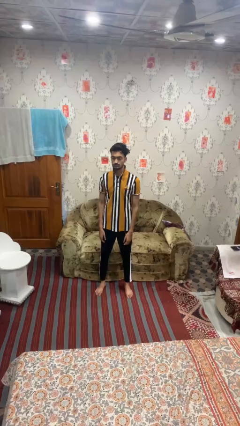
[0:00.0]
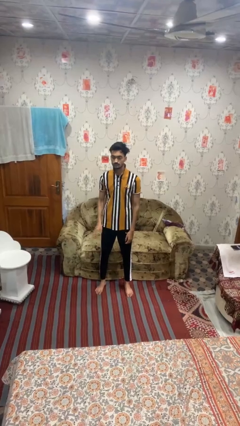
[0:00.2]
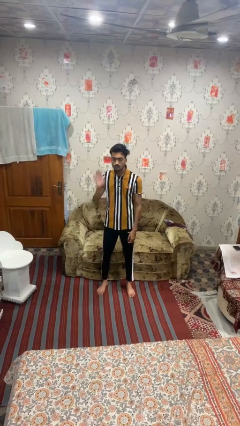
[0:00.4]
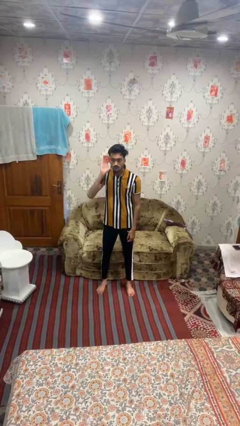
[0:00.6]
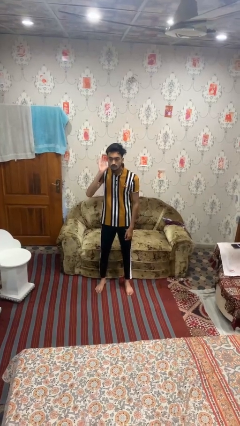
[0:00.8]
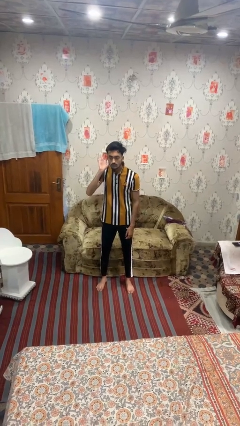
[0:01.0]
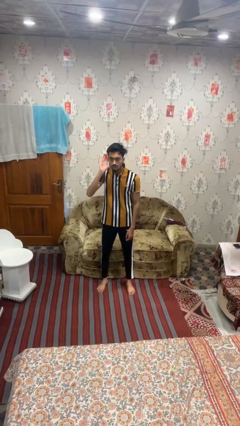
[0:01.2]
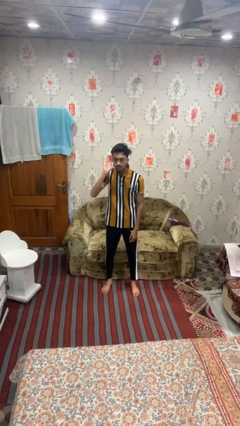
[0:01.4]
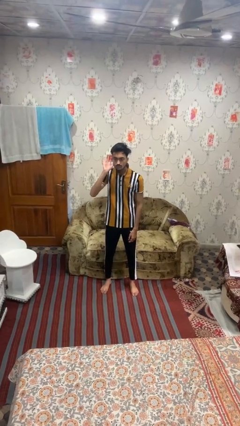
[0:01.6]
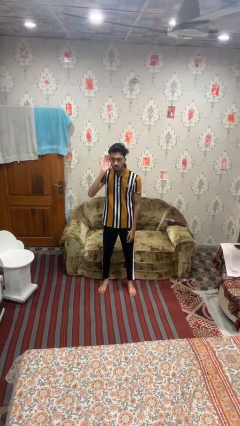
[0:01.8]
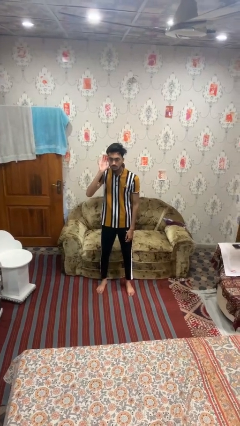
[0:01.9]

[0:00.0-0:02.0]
person gestures listen closely

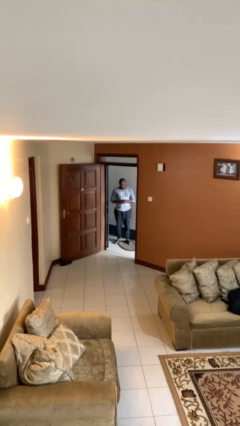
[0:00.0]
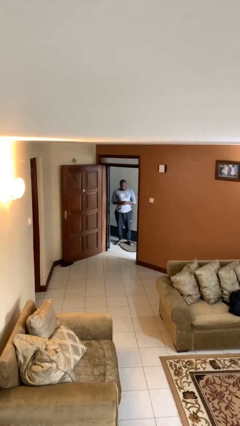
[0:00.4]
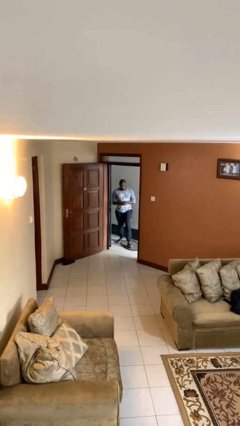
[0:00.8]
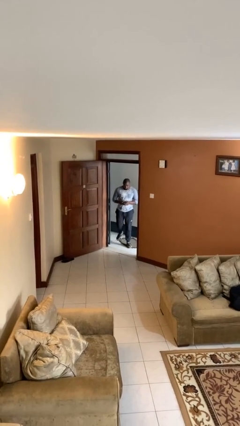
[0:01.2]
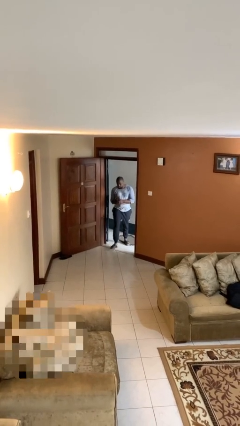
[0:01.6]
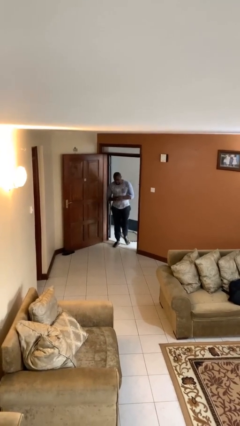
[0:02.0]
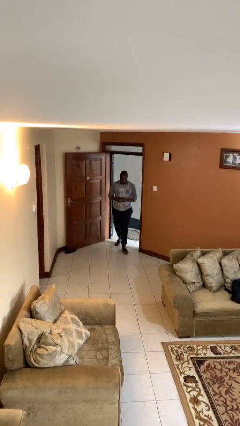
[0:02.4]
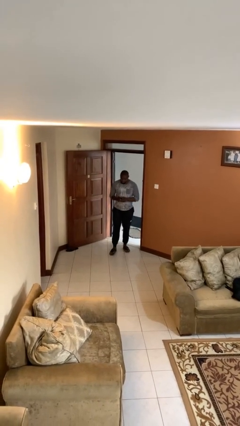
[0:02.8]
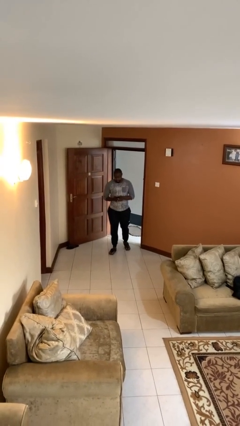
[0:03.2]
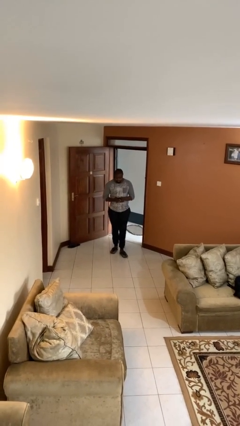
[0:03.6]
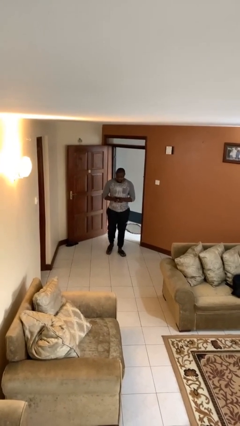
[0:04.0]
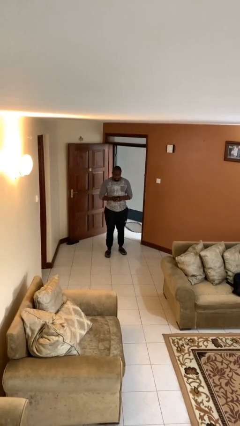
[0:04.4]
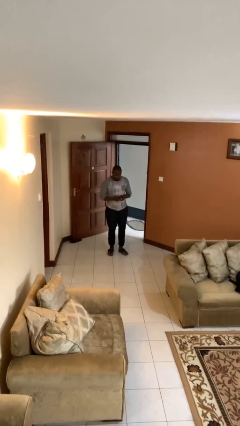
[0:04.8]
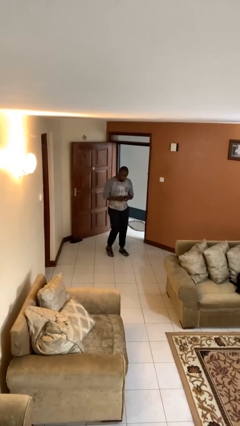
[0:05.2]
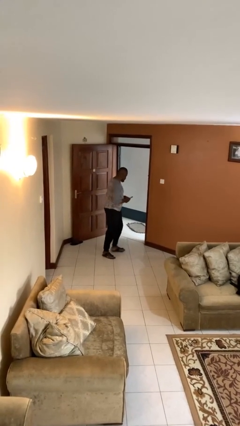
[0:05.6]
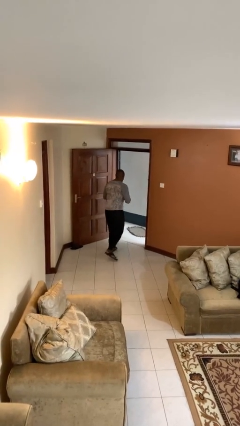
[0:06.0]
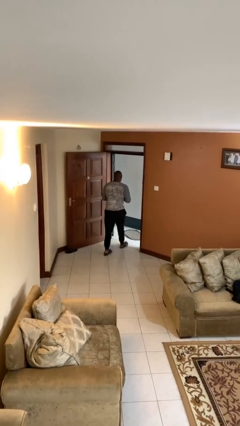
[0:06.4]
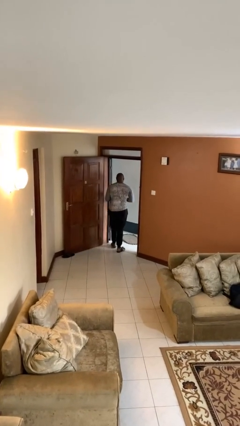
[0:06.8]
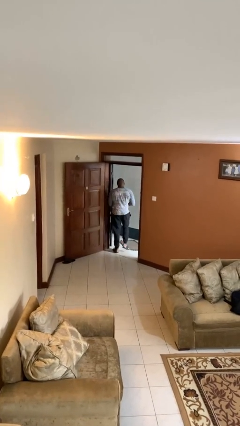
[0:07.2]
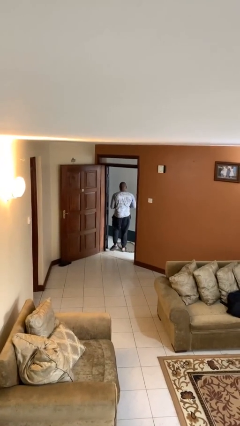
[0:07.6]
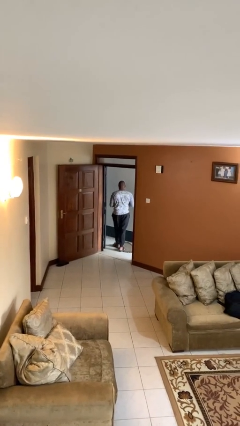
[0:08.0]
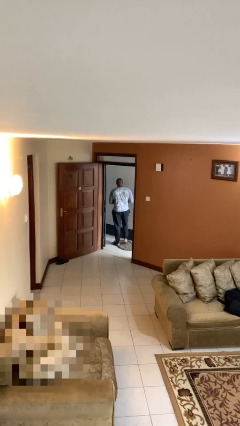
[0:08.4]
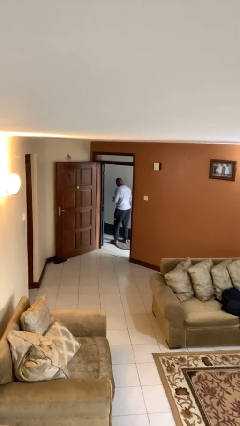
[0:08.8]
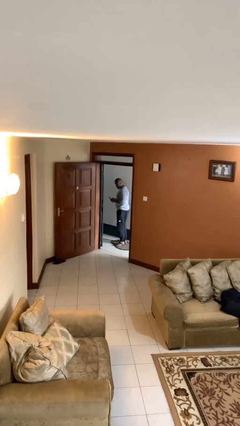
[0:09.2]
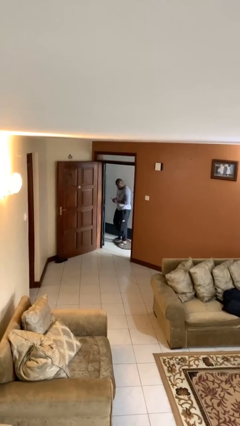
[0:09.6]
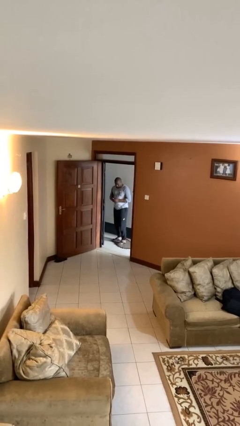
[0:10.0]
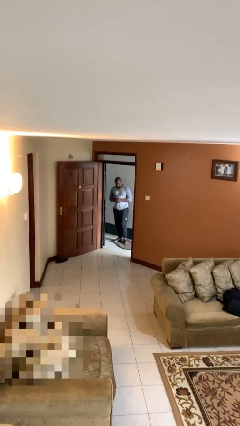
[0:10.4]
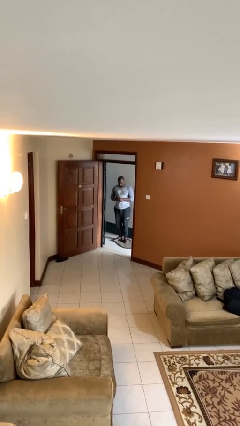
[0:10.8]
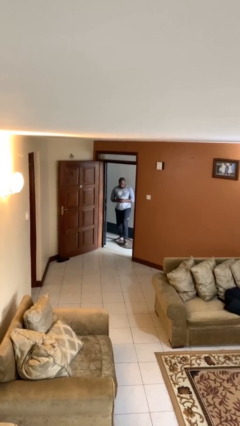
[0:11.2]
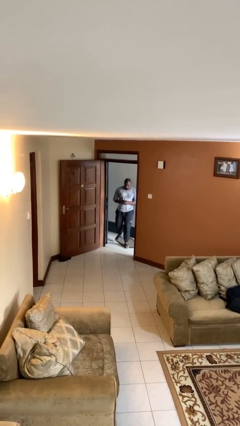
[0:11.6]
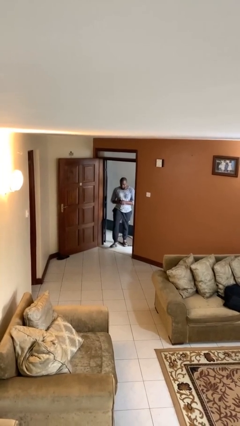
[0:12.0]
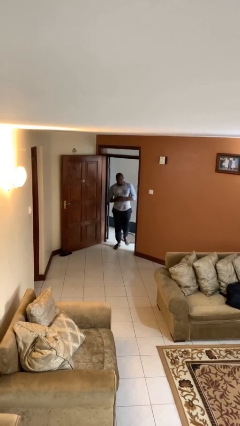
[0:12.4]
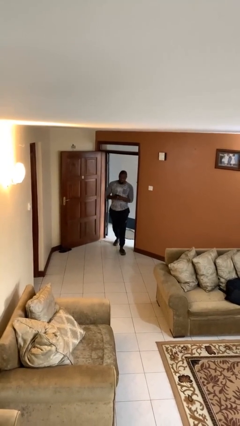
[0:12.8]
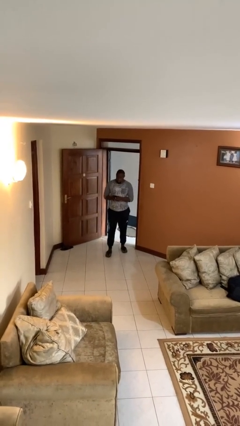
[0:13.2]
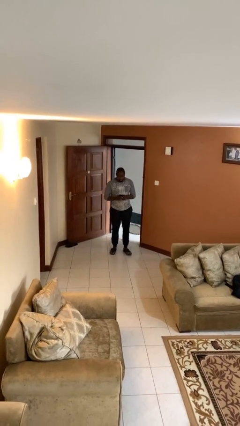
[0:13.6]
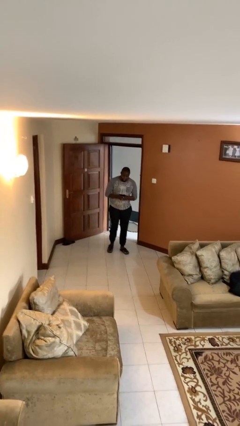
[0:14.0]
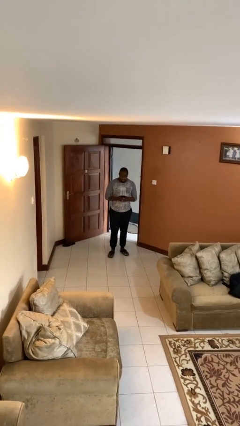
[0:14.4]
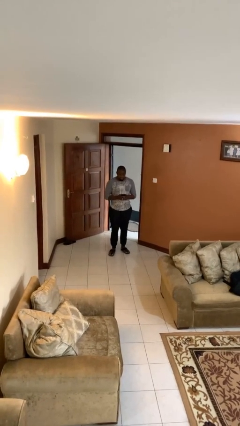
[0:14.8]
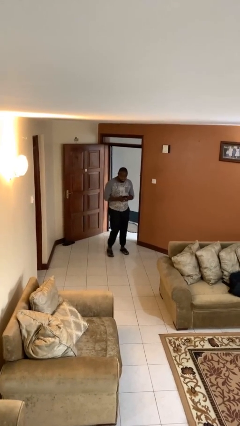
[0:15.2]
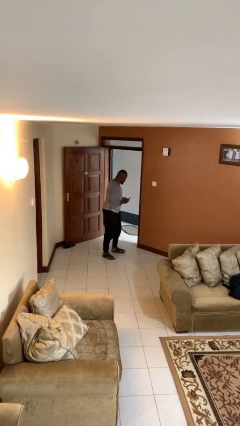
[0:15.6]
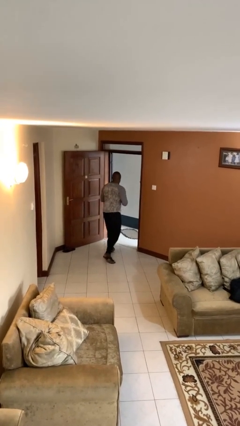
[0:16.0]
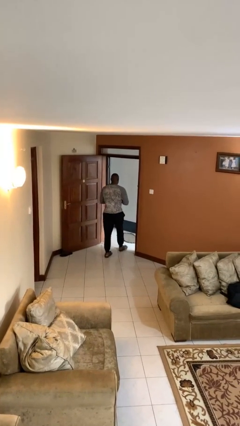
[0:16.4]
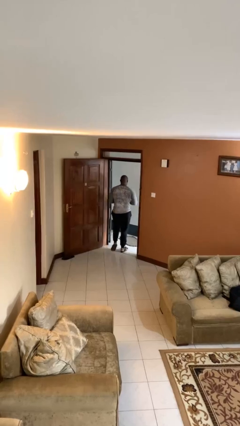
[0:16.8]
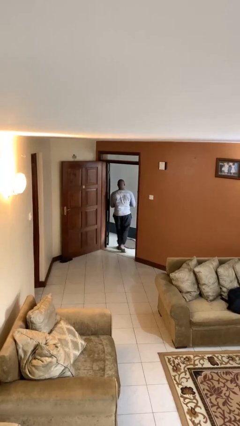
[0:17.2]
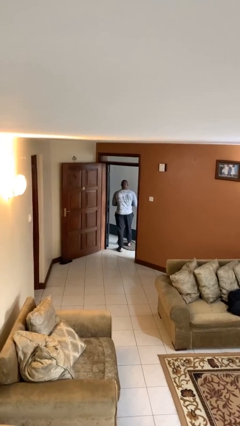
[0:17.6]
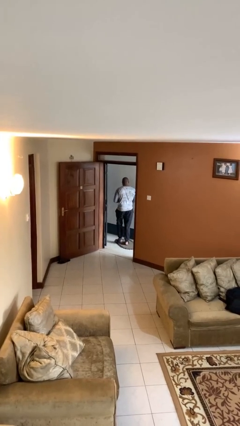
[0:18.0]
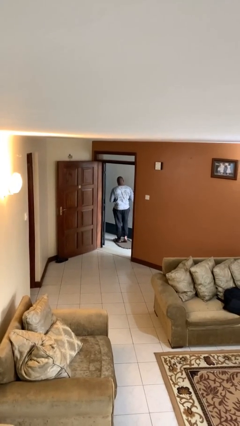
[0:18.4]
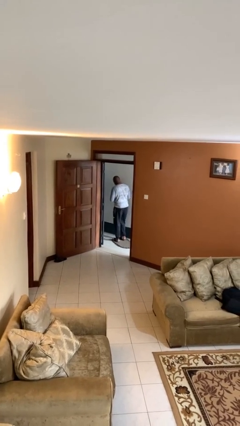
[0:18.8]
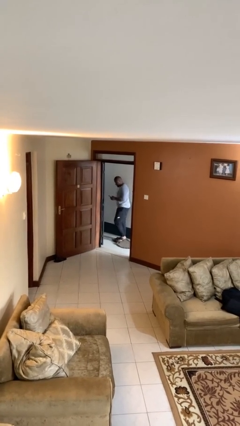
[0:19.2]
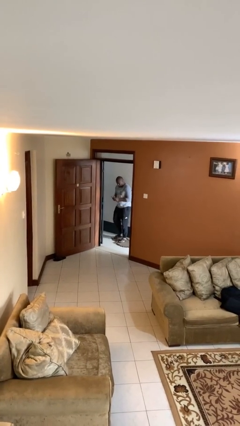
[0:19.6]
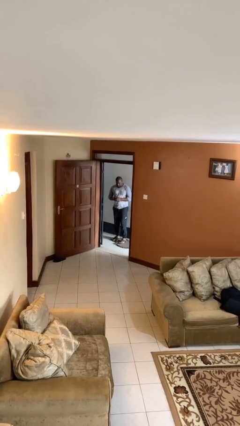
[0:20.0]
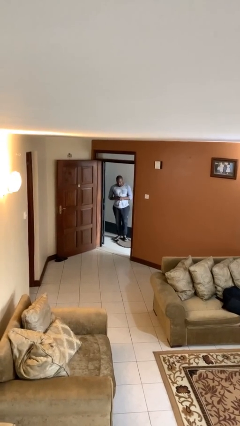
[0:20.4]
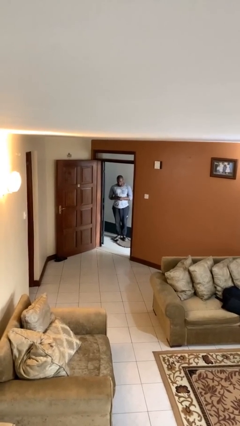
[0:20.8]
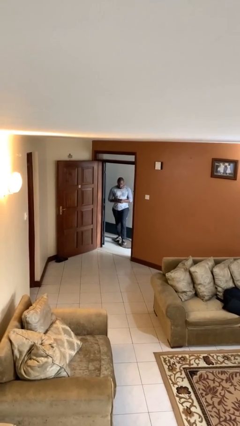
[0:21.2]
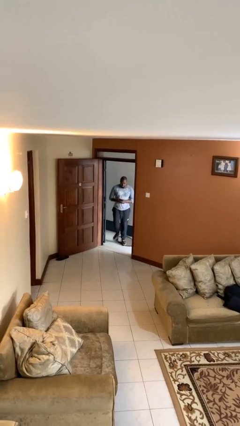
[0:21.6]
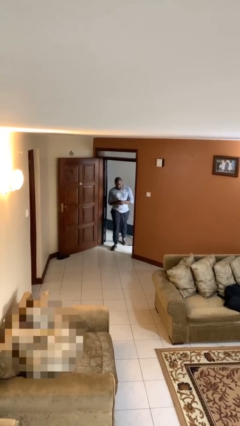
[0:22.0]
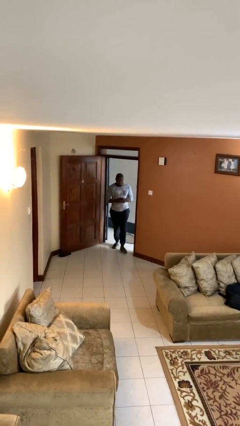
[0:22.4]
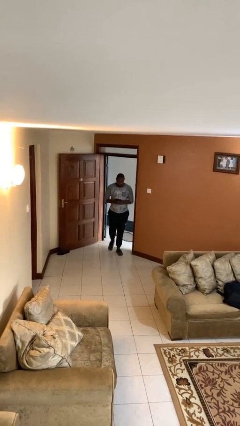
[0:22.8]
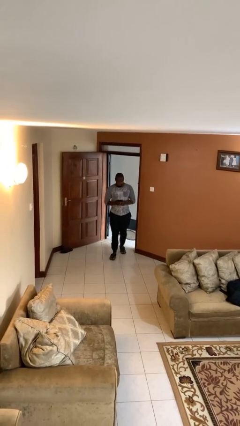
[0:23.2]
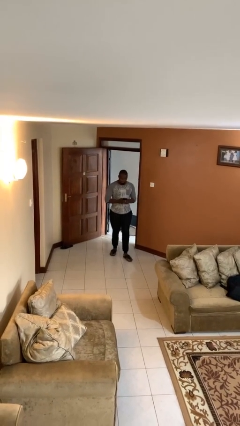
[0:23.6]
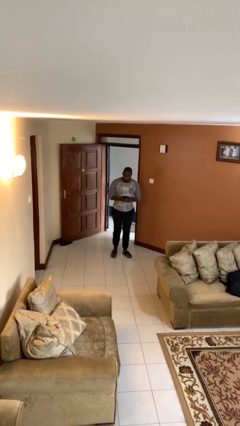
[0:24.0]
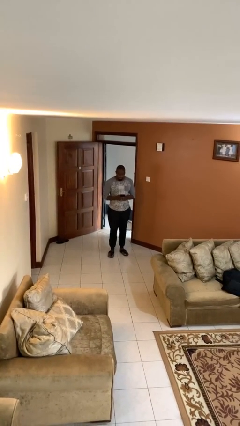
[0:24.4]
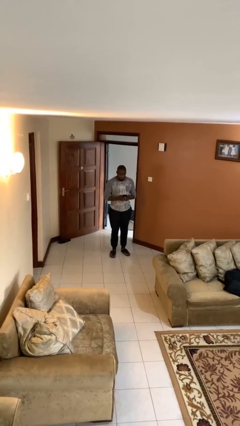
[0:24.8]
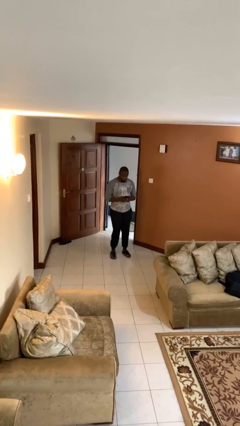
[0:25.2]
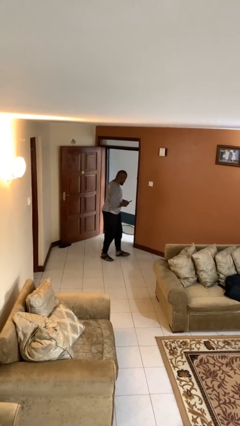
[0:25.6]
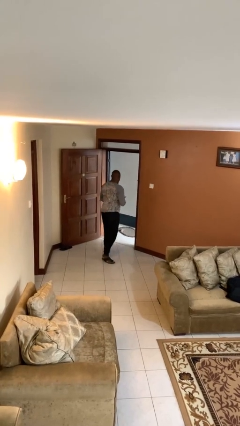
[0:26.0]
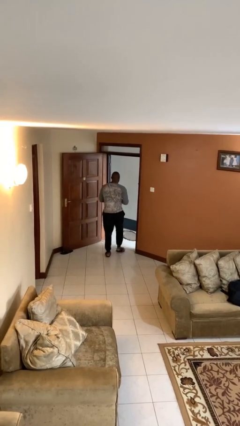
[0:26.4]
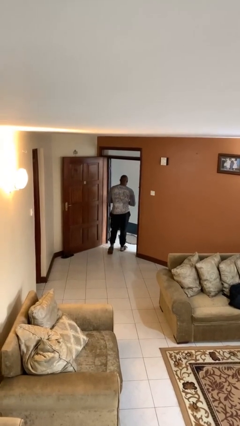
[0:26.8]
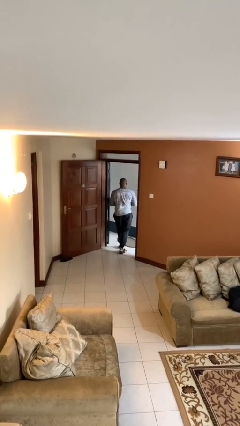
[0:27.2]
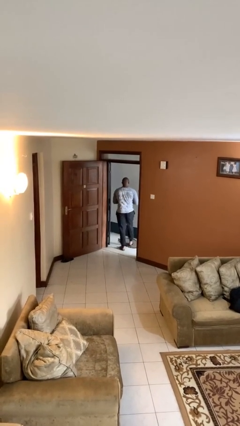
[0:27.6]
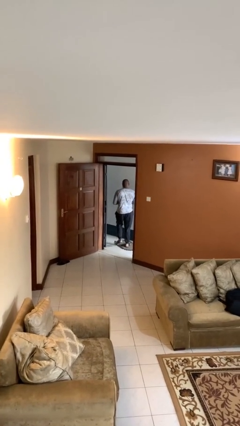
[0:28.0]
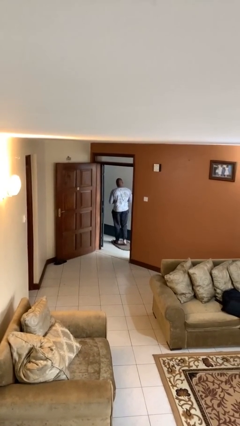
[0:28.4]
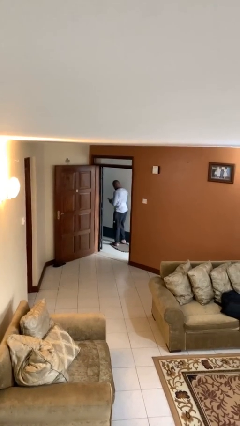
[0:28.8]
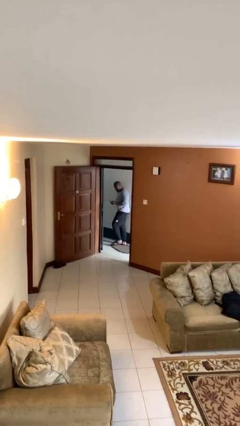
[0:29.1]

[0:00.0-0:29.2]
person texts on phone

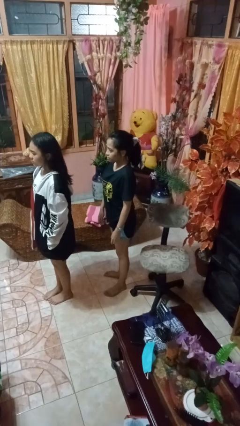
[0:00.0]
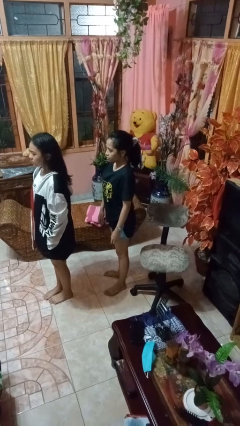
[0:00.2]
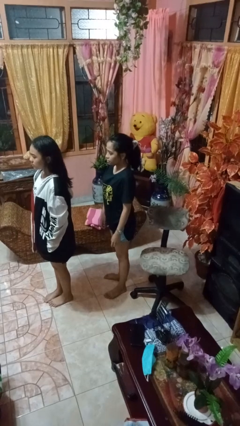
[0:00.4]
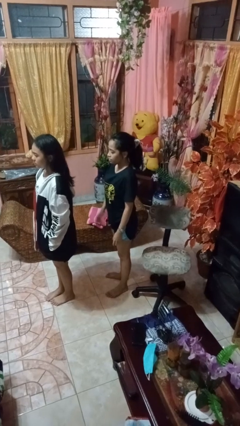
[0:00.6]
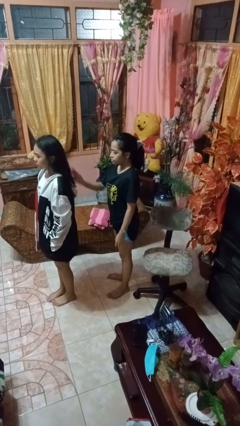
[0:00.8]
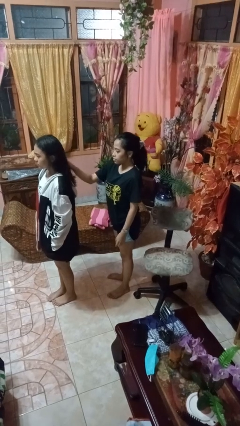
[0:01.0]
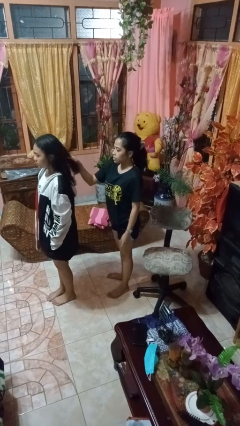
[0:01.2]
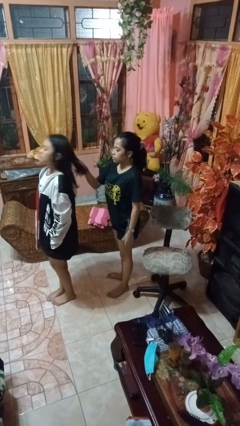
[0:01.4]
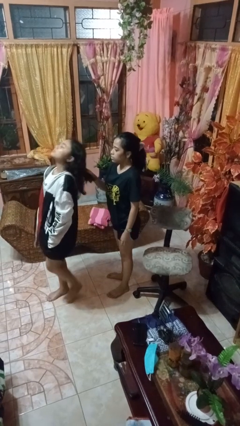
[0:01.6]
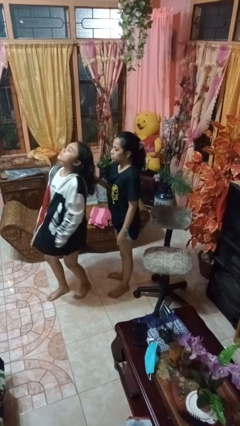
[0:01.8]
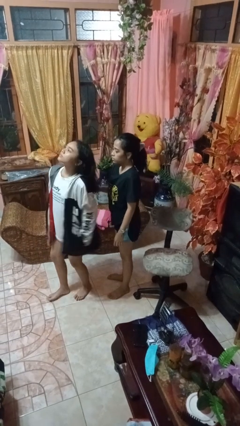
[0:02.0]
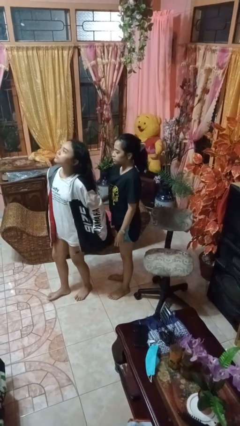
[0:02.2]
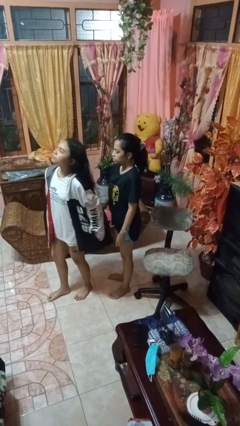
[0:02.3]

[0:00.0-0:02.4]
person grabs person by hair
